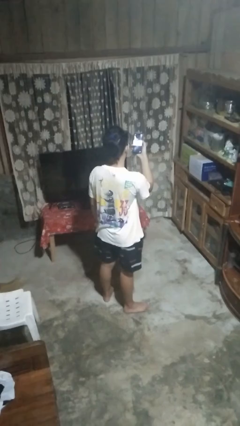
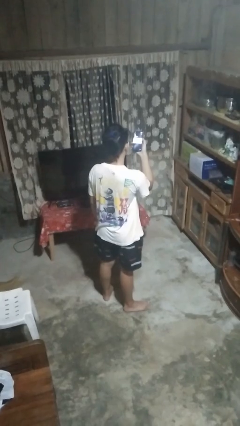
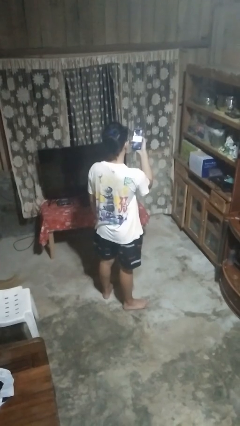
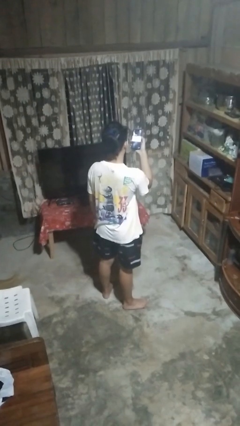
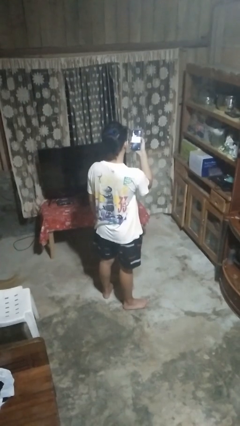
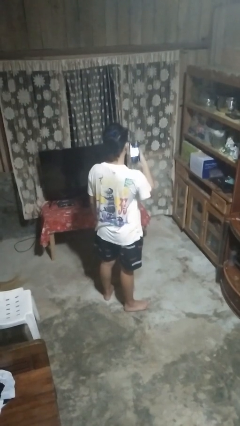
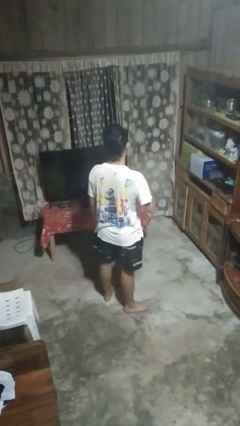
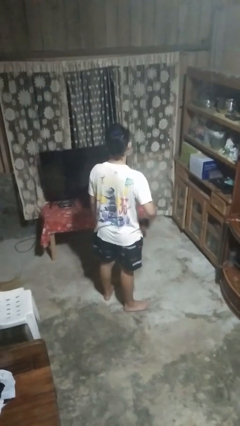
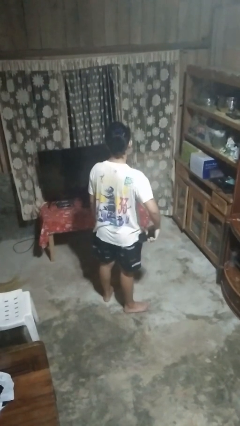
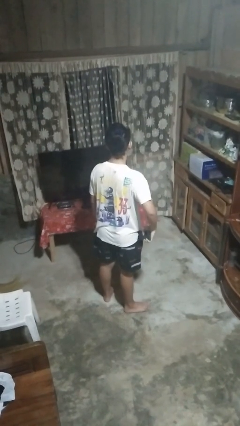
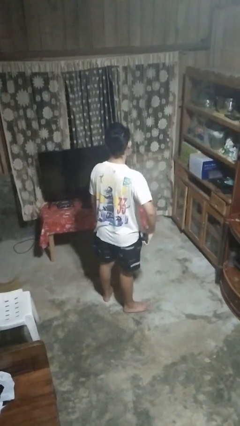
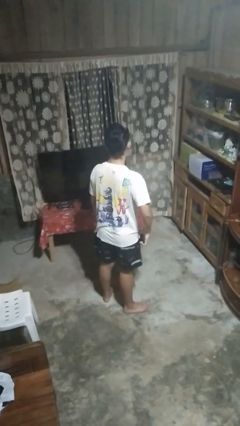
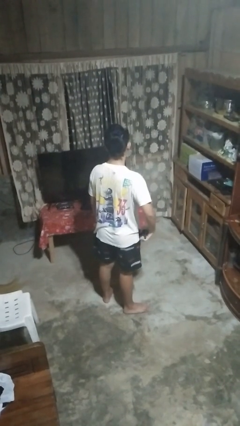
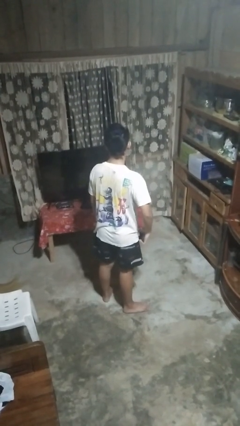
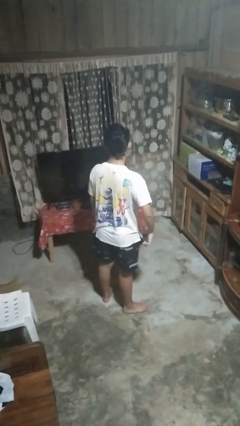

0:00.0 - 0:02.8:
person puts phone into pocket

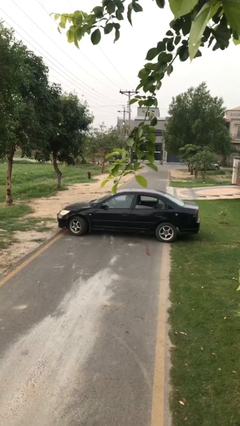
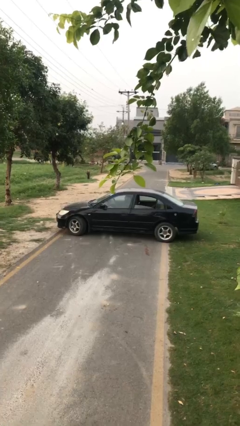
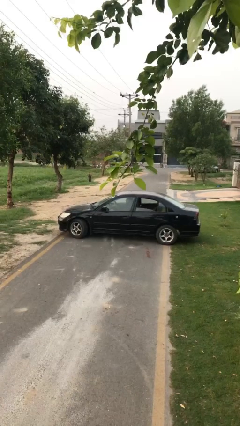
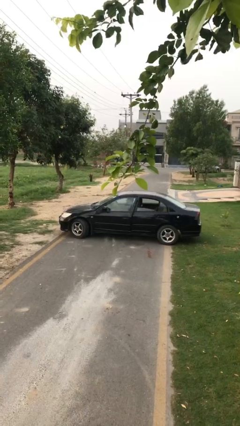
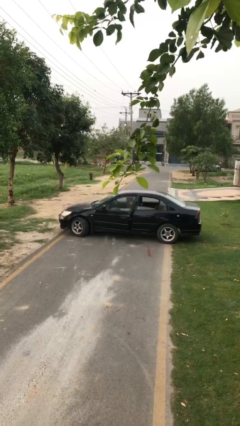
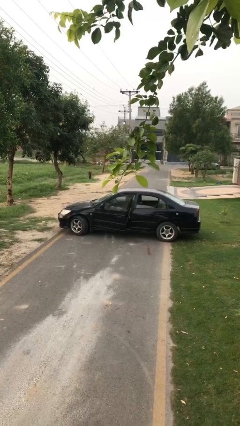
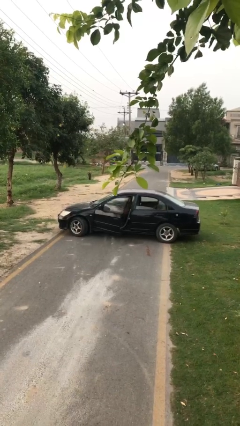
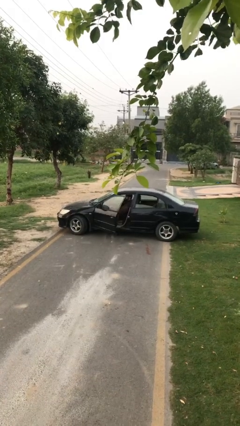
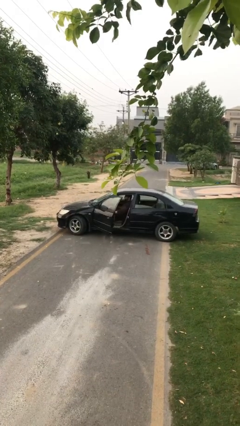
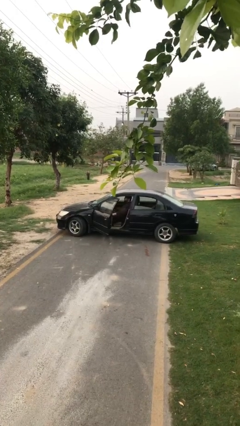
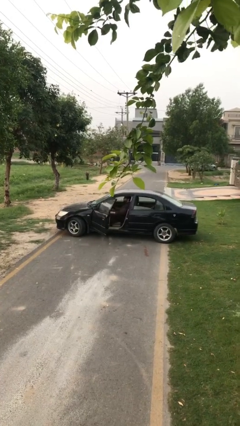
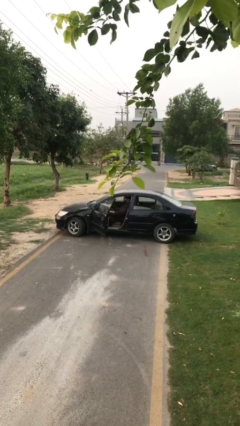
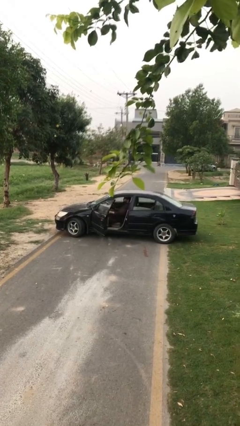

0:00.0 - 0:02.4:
person opens car door

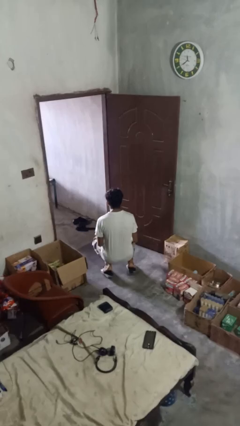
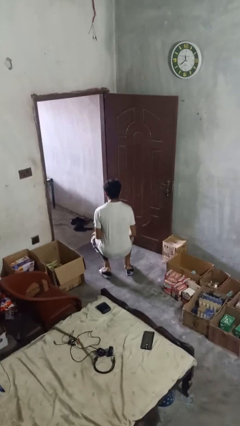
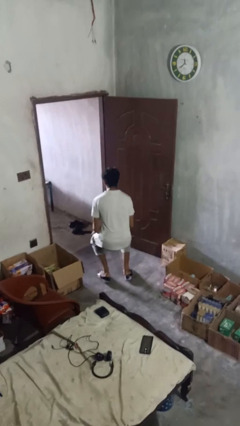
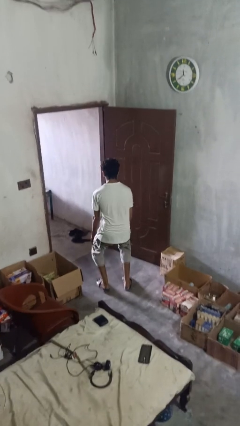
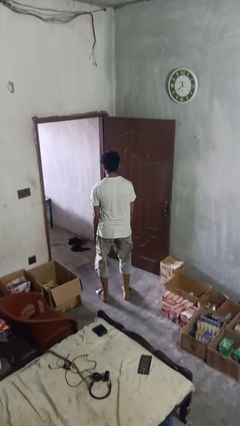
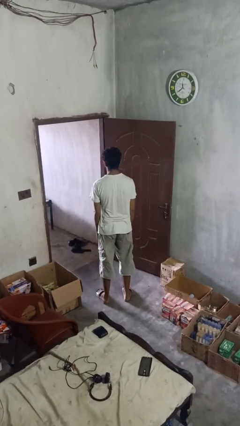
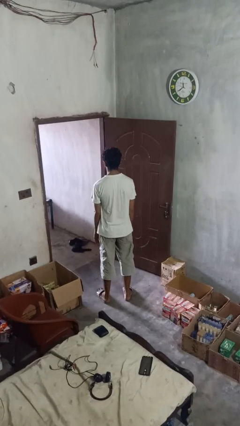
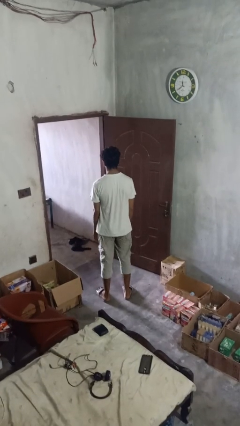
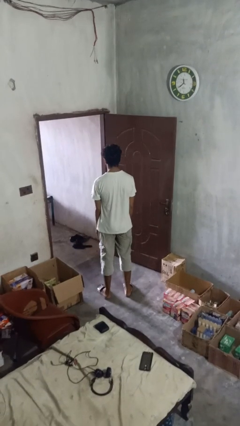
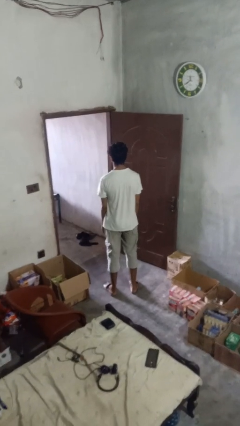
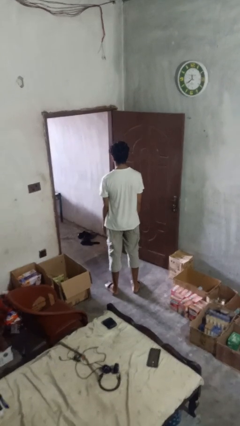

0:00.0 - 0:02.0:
person stands up from floor

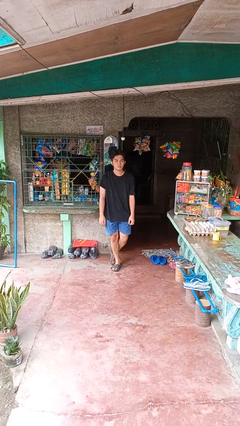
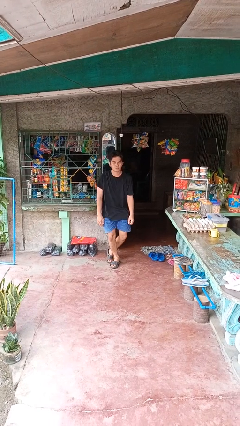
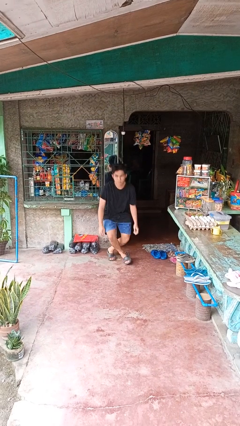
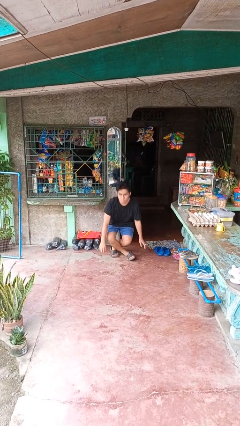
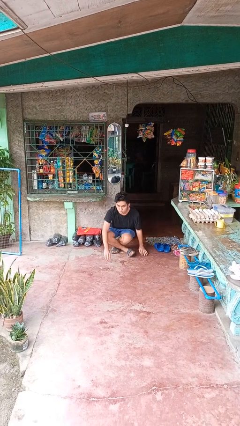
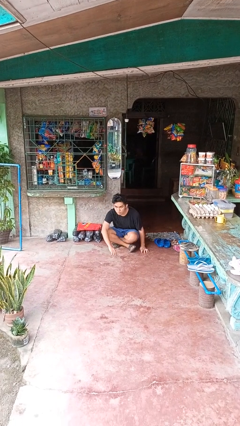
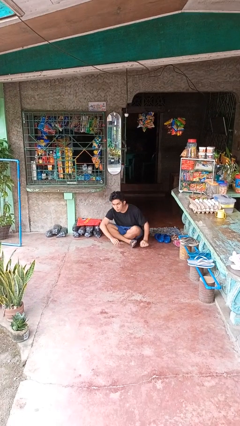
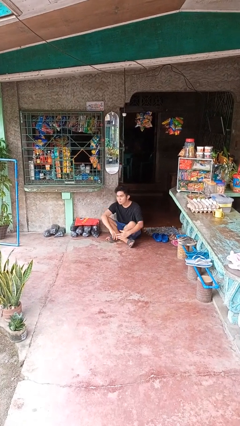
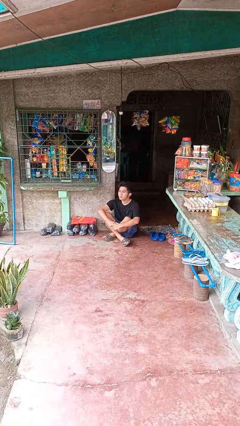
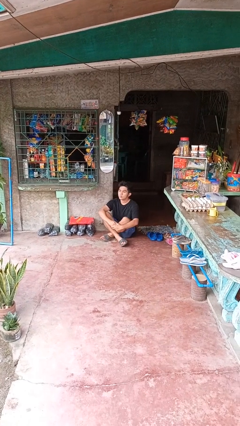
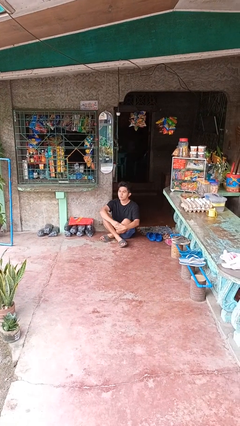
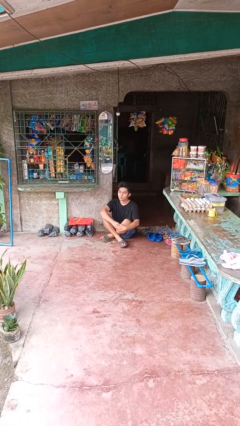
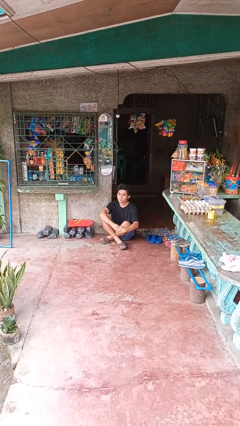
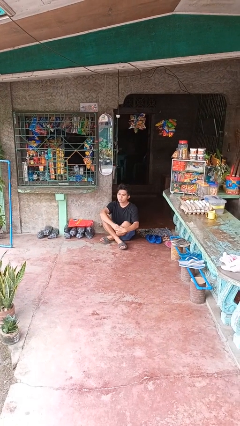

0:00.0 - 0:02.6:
person sits crisscross

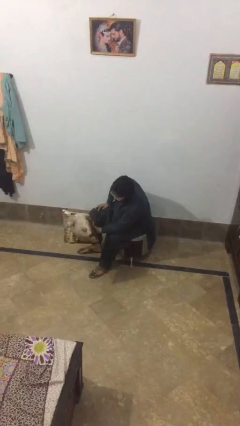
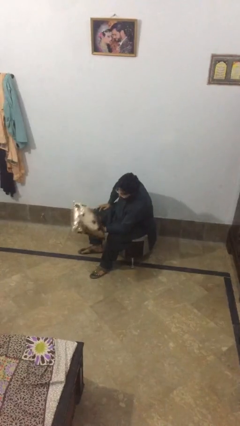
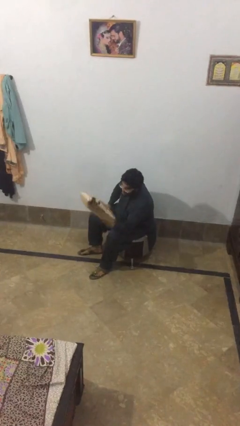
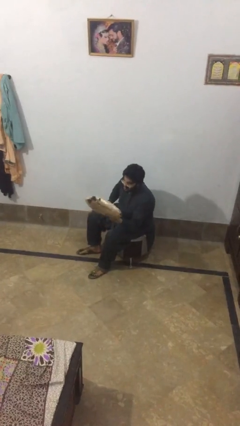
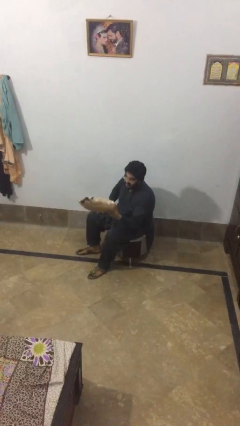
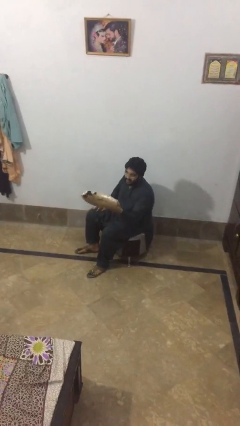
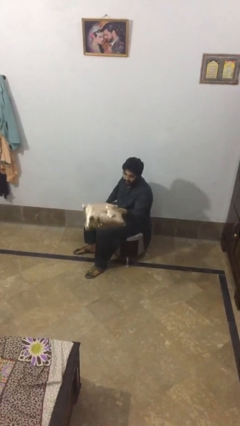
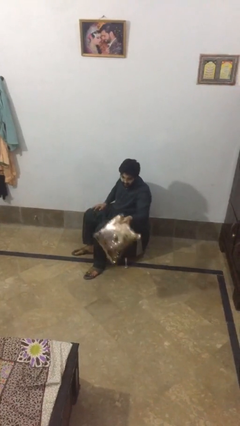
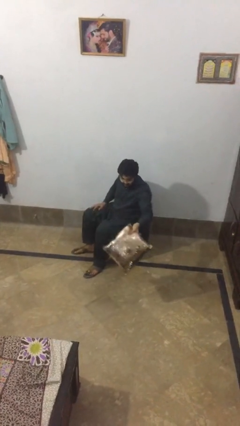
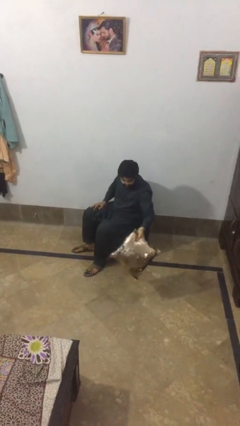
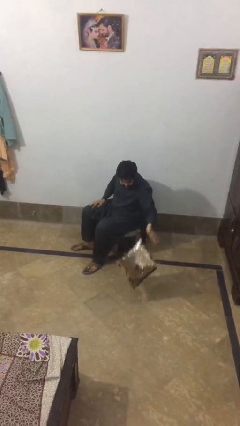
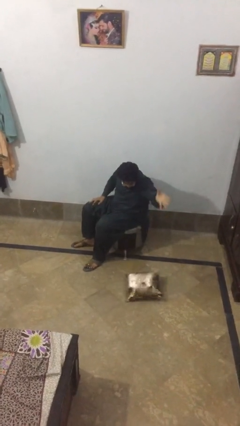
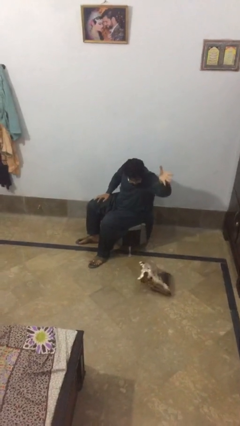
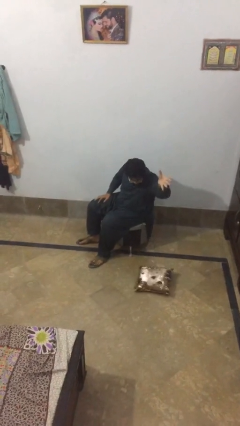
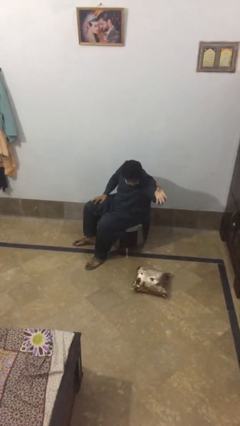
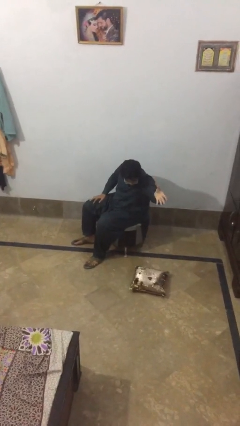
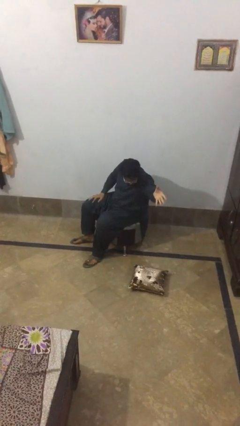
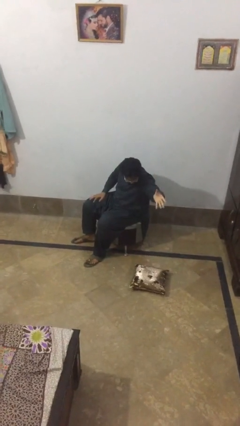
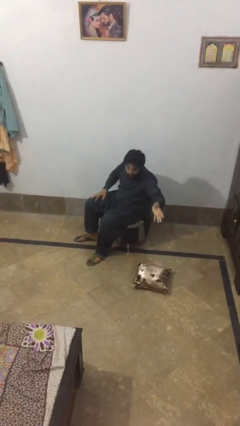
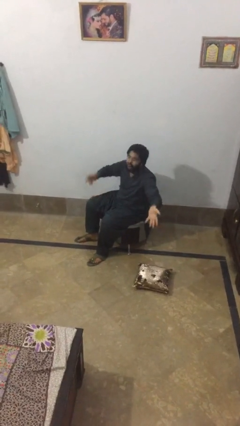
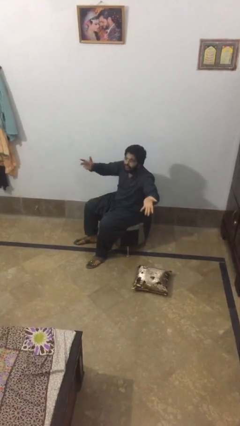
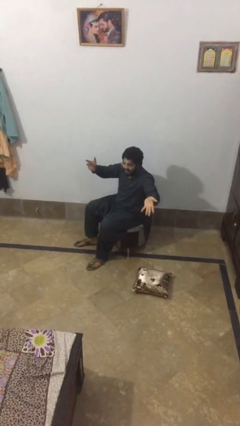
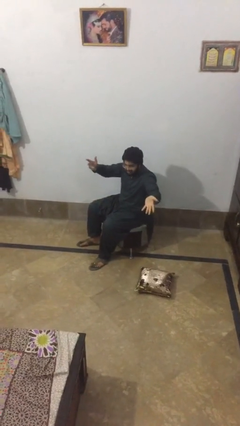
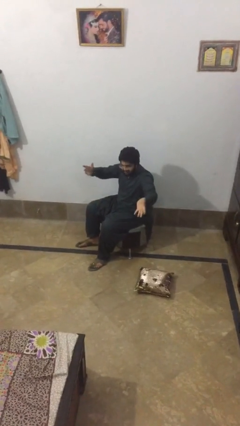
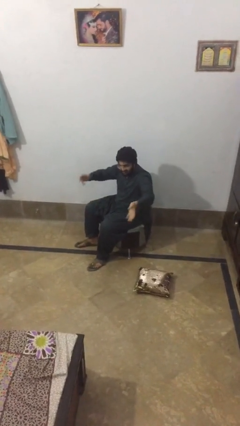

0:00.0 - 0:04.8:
person puts down object on floor

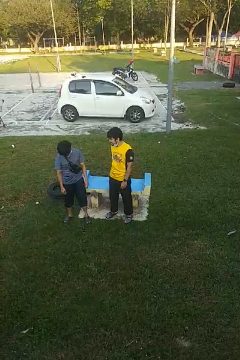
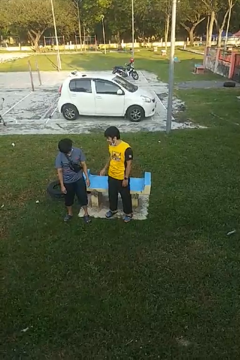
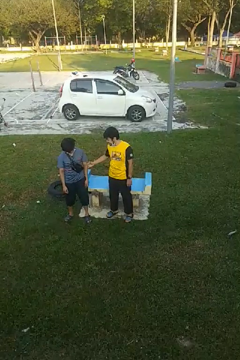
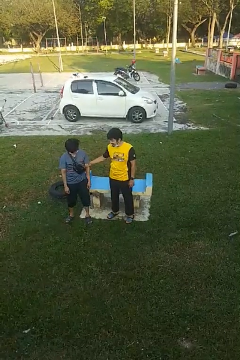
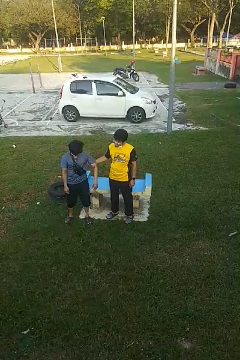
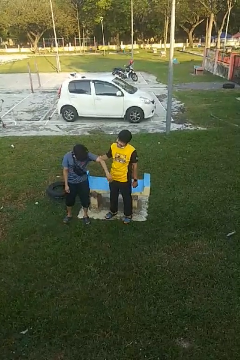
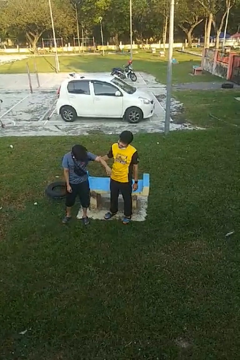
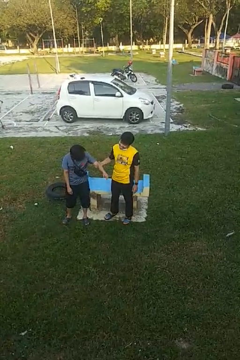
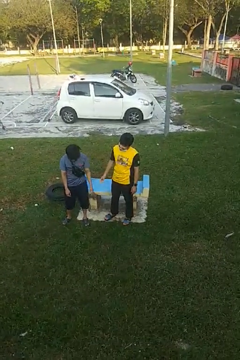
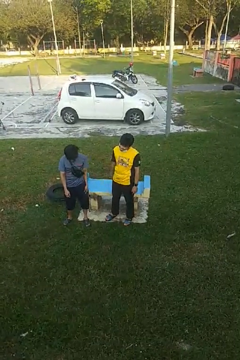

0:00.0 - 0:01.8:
person grabs person by bicep

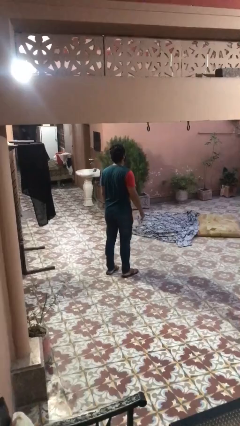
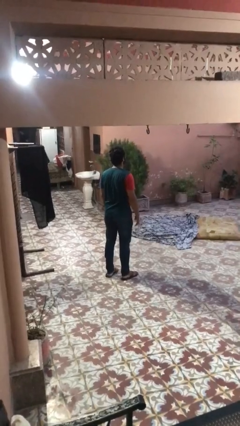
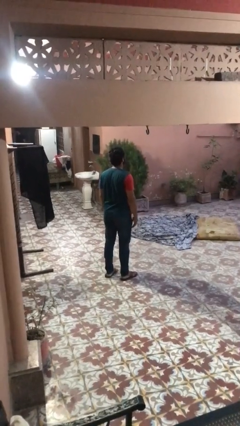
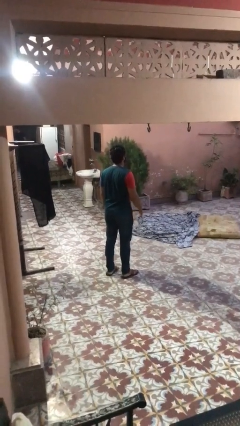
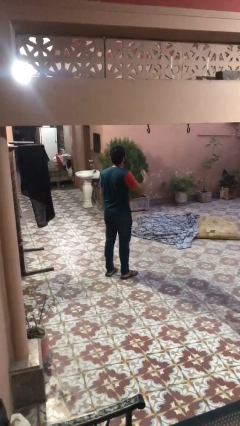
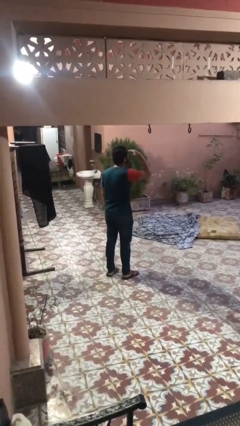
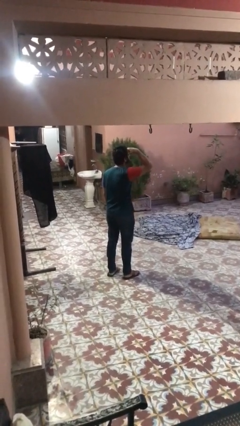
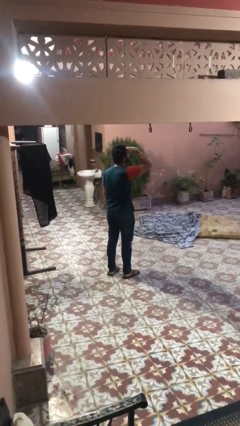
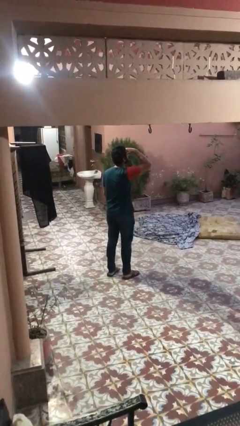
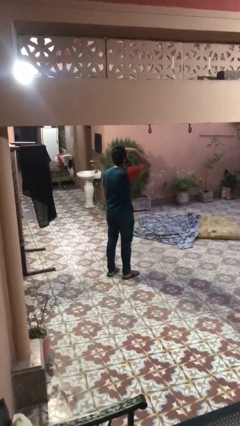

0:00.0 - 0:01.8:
person shades eyes
